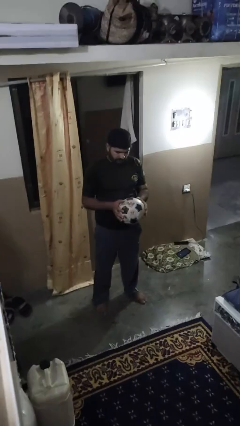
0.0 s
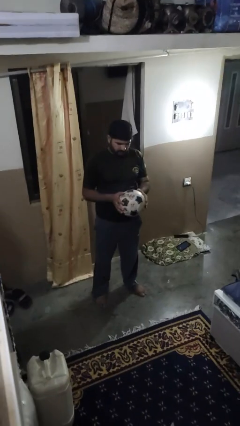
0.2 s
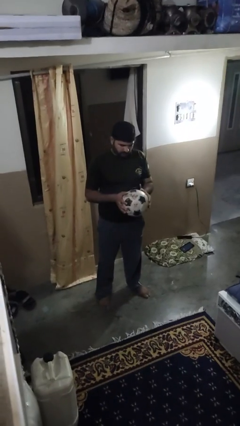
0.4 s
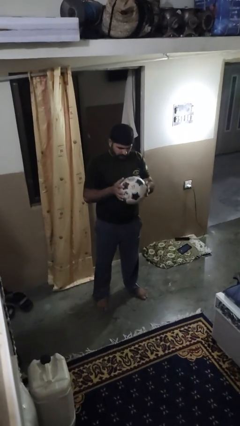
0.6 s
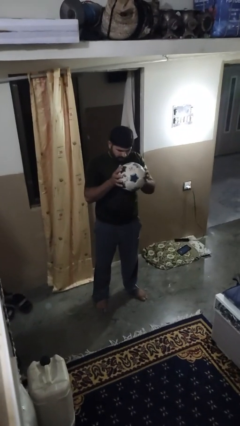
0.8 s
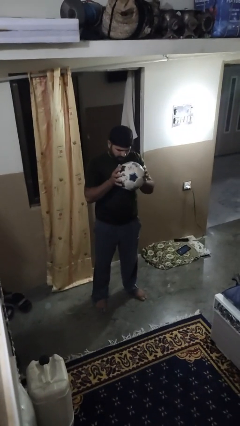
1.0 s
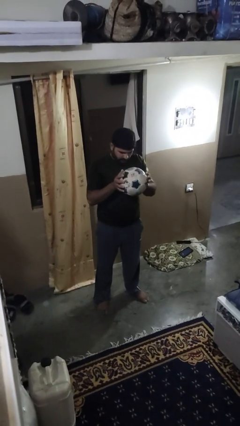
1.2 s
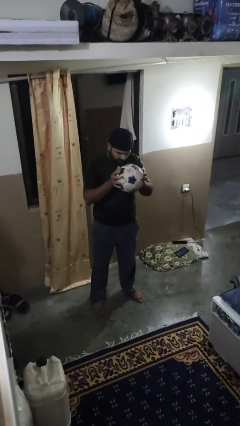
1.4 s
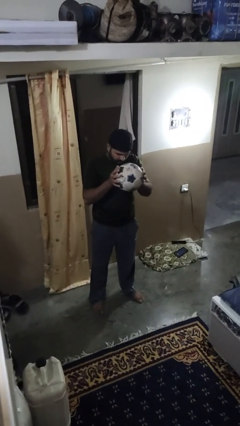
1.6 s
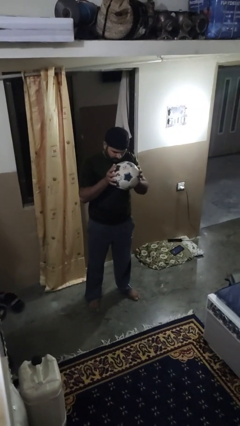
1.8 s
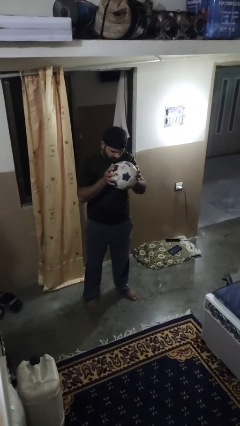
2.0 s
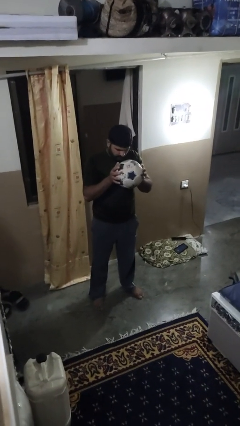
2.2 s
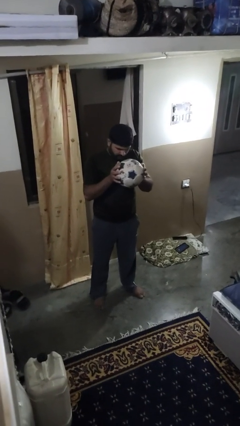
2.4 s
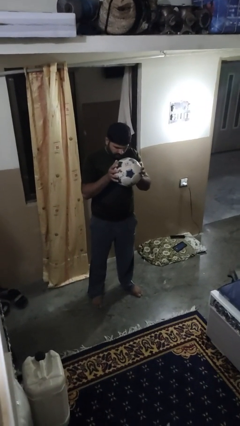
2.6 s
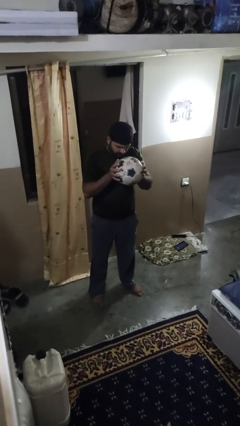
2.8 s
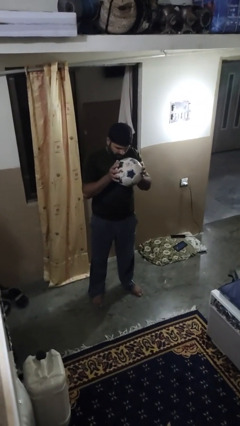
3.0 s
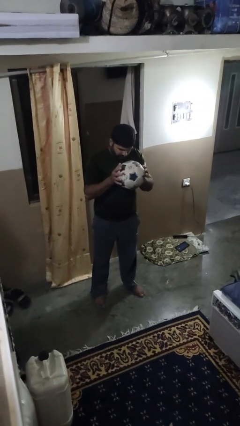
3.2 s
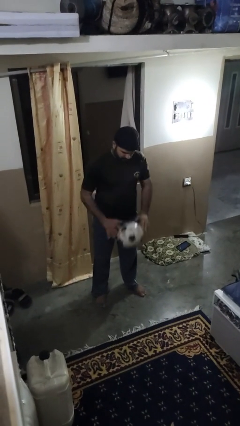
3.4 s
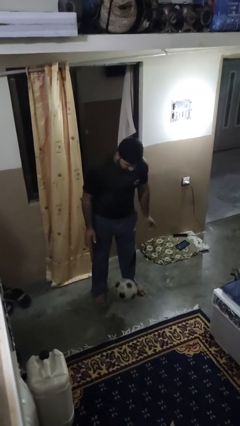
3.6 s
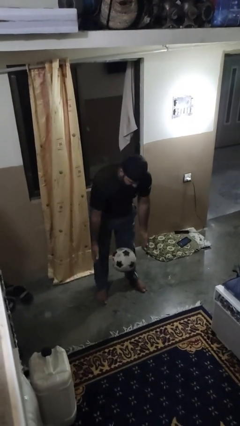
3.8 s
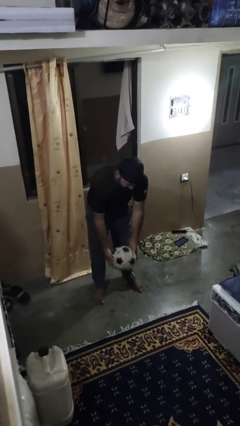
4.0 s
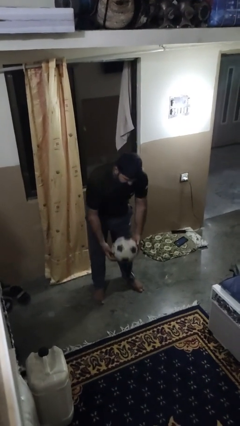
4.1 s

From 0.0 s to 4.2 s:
person bounces ball on floor

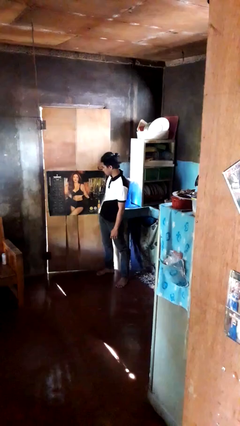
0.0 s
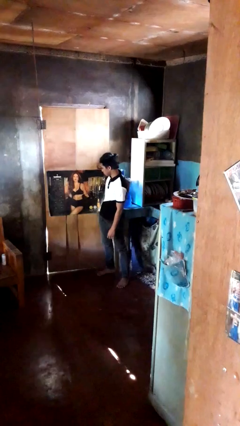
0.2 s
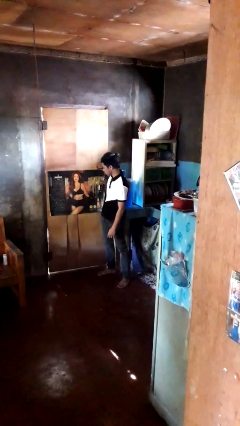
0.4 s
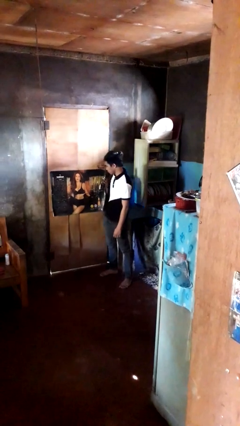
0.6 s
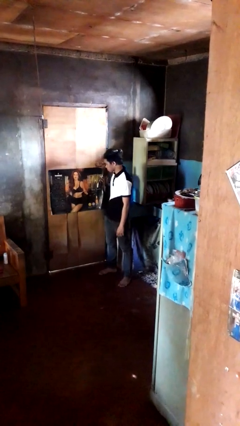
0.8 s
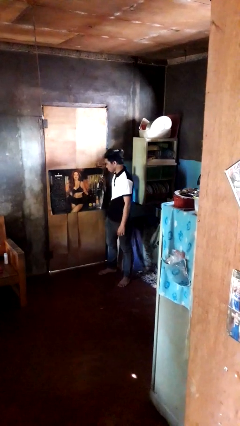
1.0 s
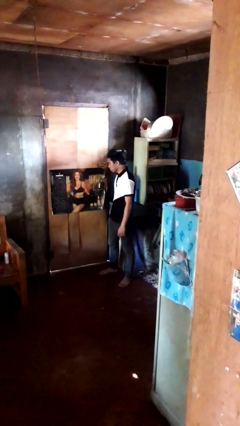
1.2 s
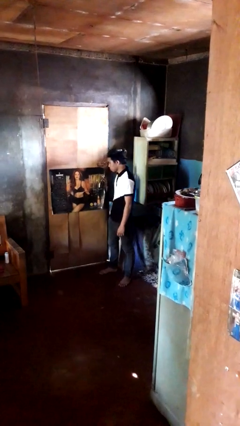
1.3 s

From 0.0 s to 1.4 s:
person closes door with hip

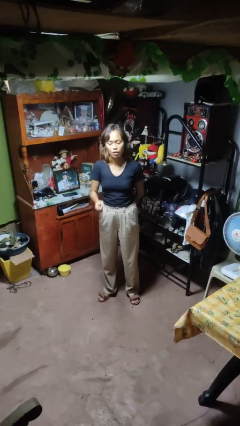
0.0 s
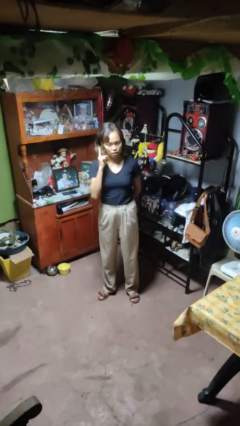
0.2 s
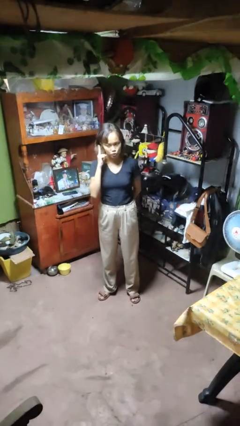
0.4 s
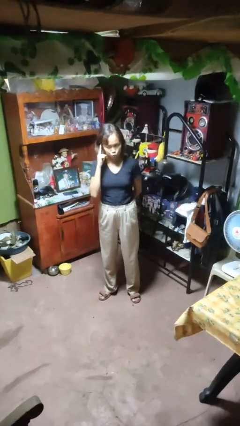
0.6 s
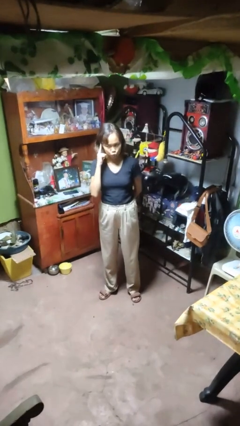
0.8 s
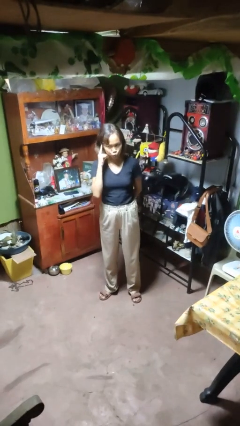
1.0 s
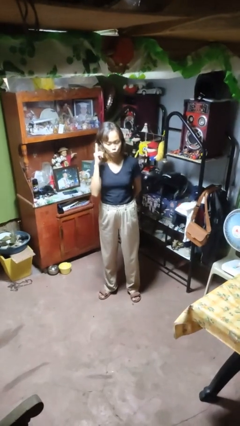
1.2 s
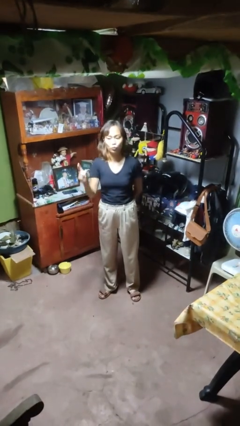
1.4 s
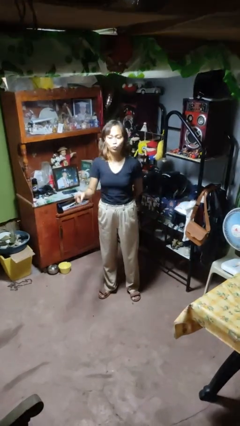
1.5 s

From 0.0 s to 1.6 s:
person gestures listen closely

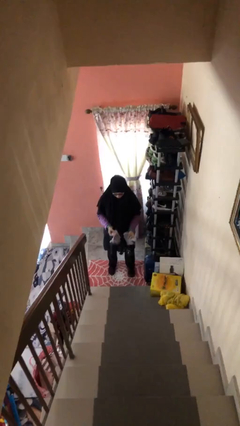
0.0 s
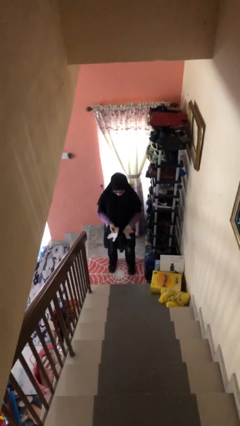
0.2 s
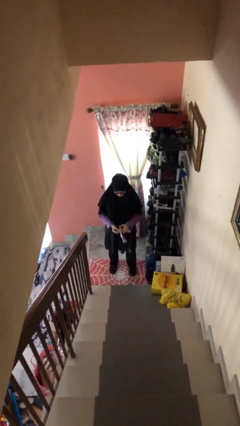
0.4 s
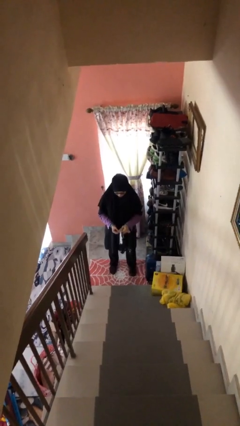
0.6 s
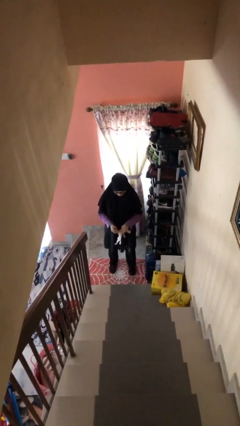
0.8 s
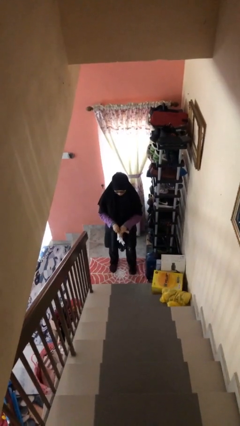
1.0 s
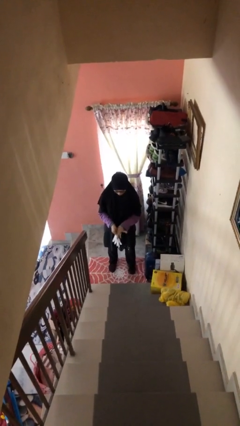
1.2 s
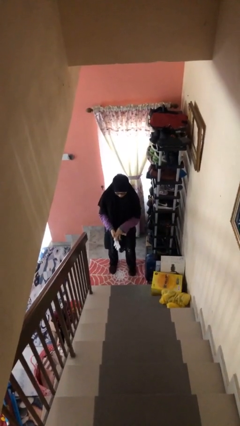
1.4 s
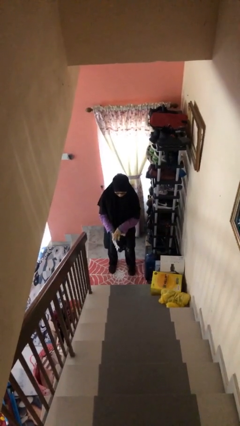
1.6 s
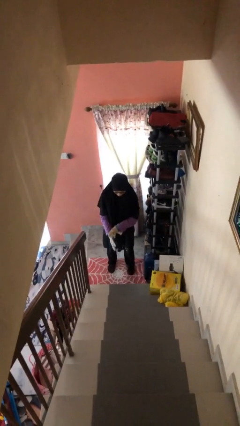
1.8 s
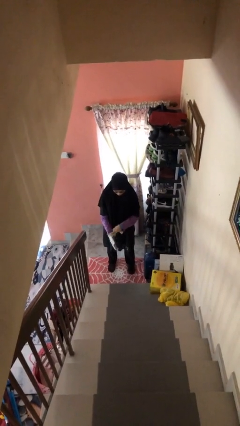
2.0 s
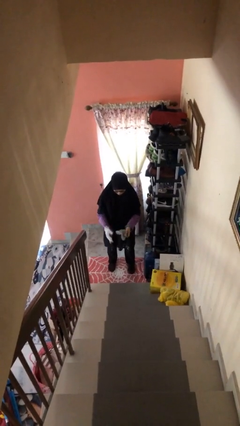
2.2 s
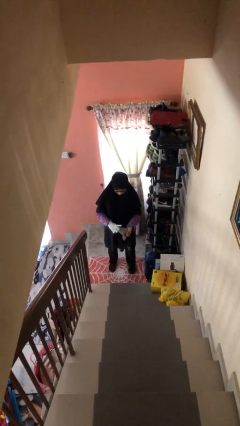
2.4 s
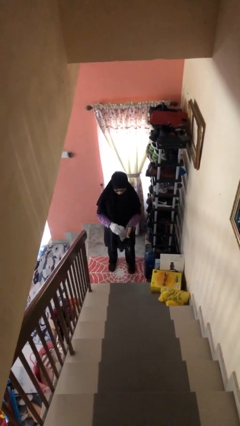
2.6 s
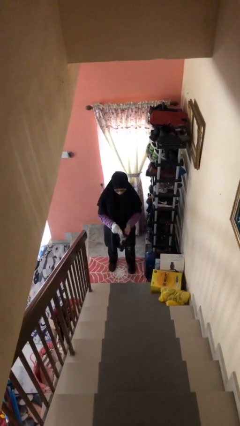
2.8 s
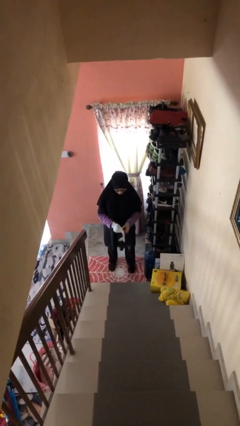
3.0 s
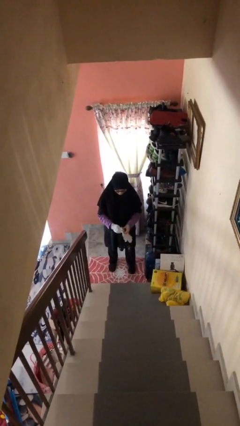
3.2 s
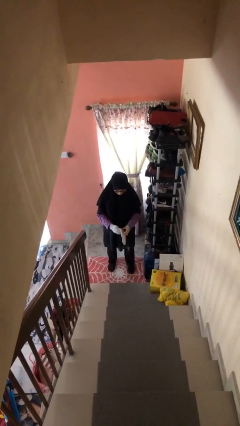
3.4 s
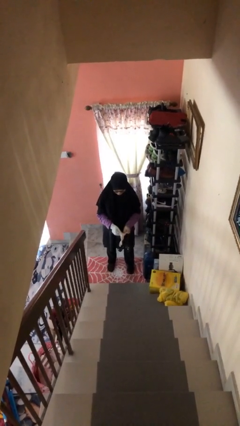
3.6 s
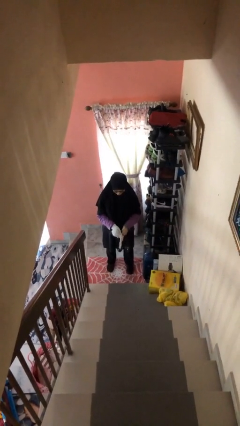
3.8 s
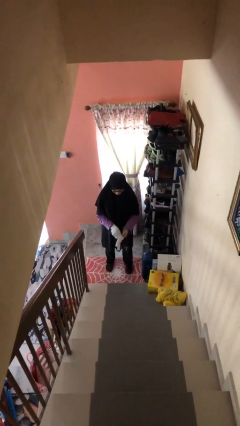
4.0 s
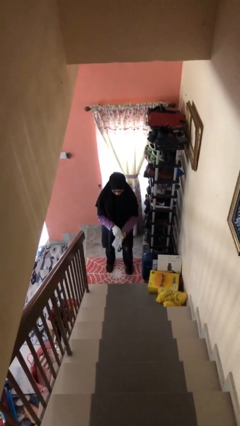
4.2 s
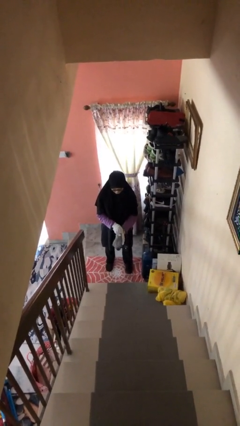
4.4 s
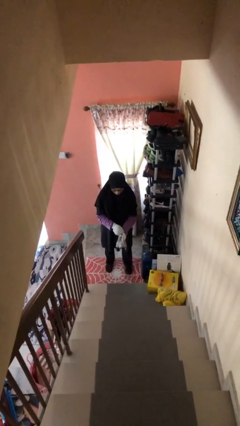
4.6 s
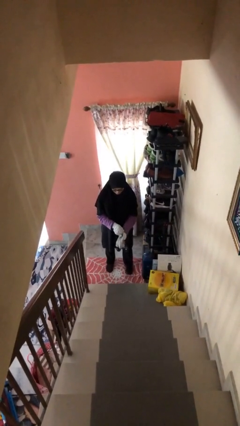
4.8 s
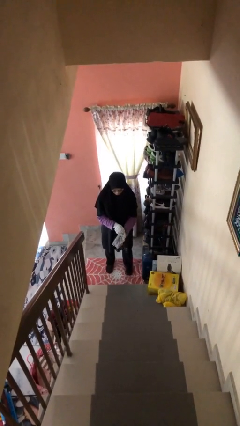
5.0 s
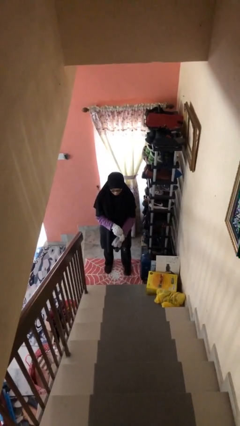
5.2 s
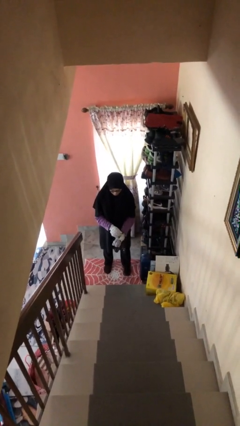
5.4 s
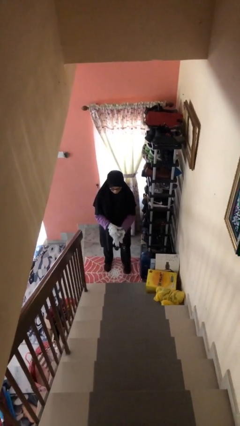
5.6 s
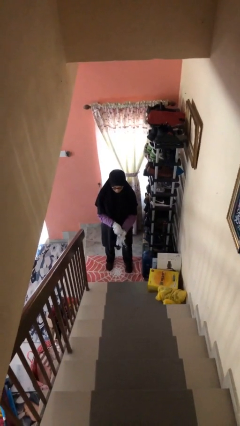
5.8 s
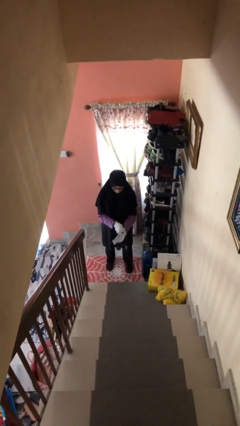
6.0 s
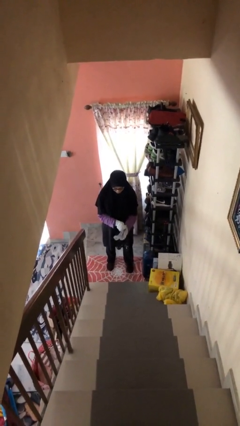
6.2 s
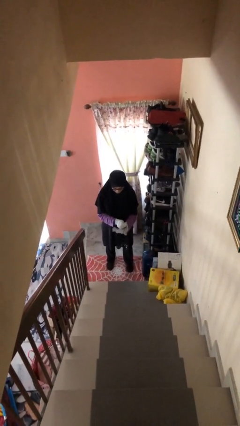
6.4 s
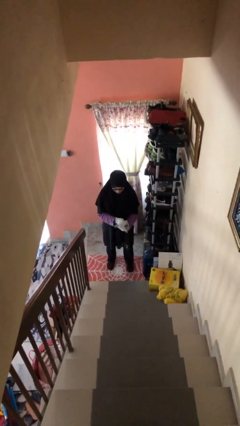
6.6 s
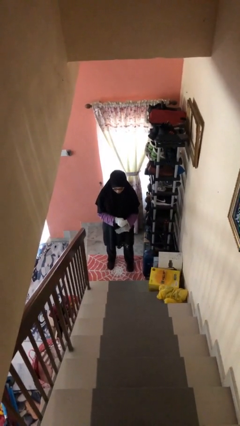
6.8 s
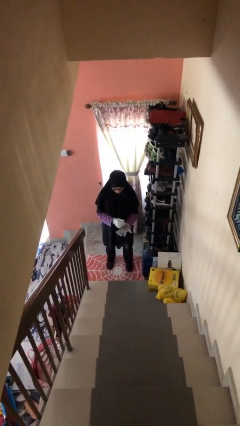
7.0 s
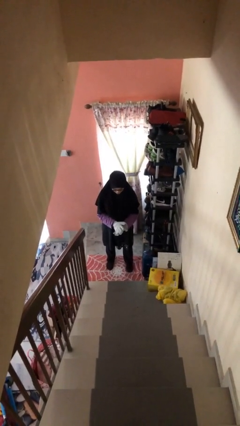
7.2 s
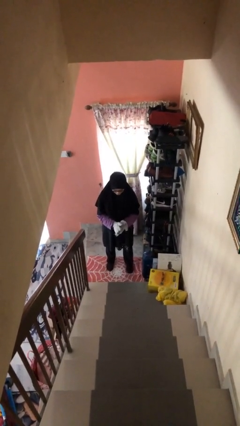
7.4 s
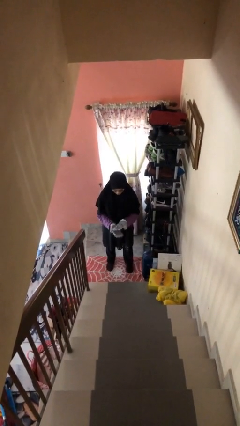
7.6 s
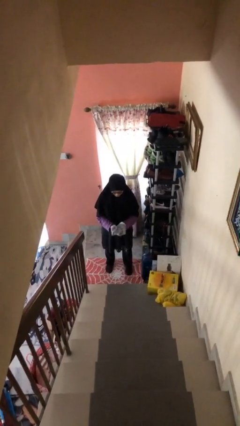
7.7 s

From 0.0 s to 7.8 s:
person puts on gloves

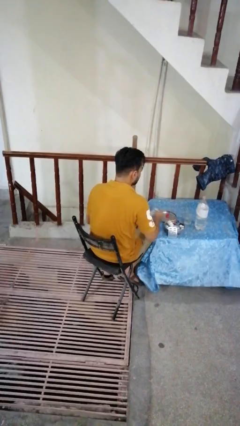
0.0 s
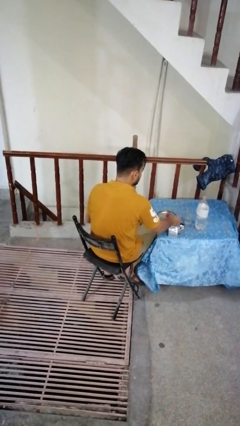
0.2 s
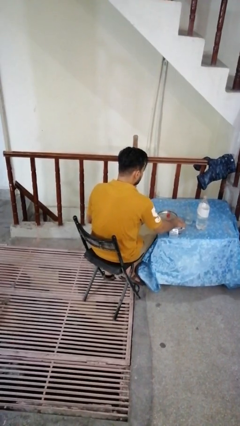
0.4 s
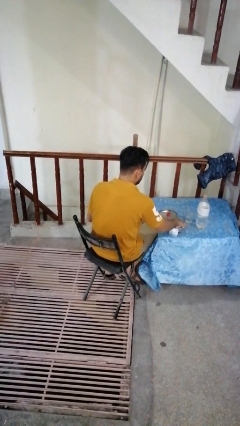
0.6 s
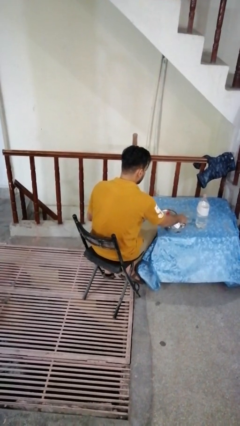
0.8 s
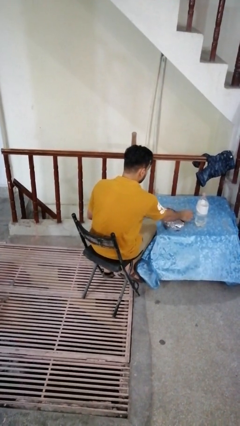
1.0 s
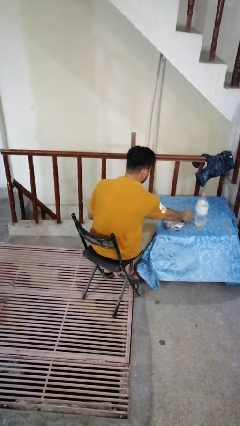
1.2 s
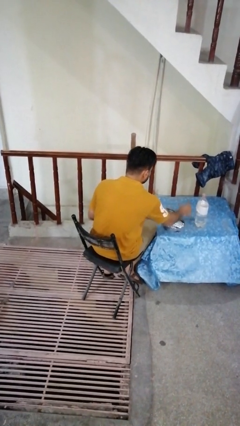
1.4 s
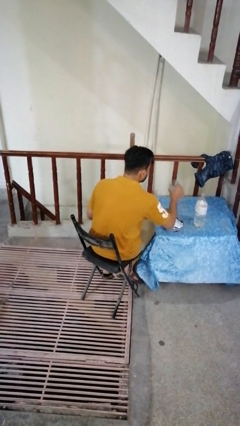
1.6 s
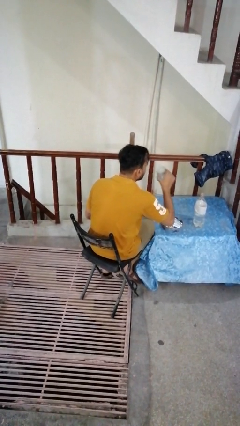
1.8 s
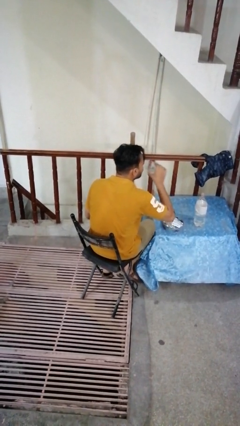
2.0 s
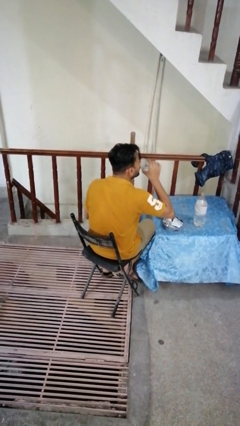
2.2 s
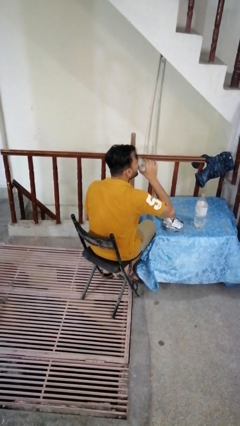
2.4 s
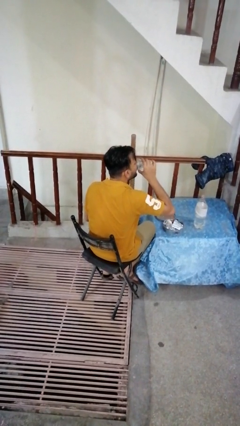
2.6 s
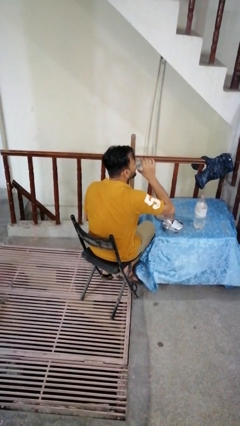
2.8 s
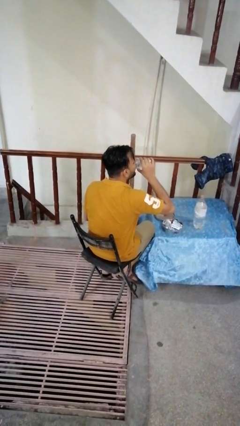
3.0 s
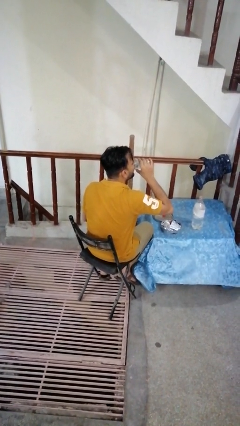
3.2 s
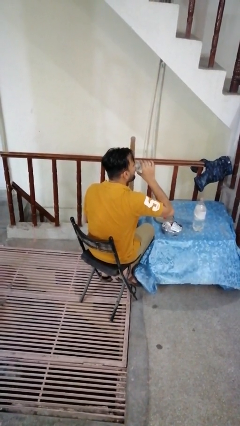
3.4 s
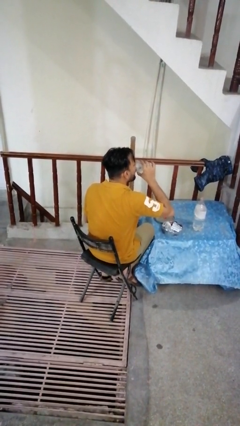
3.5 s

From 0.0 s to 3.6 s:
person drinks from cup
